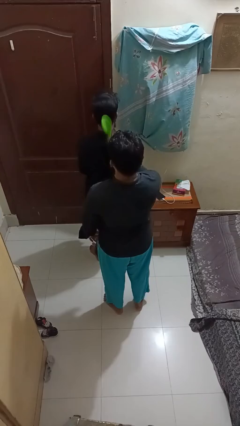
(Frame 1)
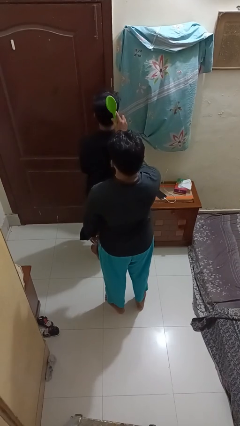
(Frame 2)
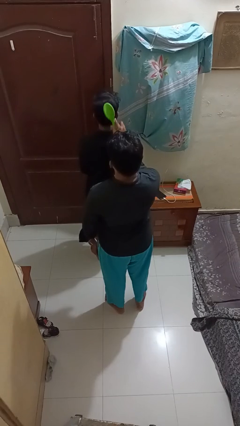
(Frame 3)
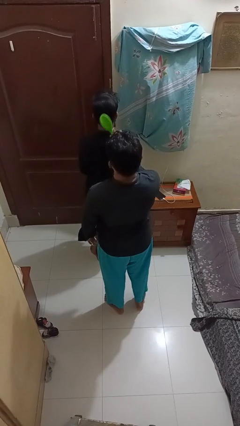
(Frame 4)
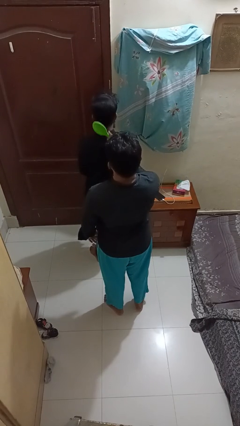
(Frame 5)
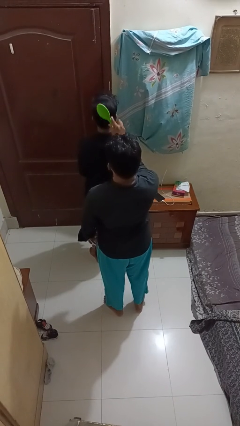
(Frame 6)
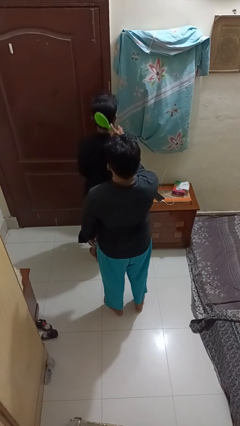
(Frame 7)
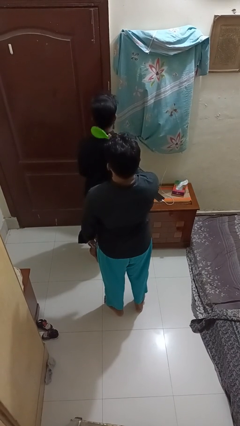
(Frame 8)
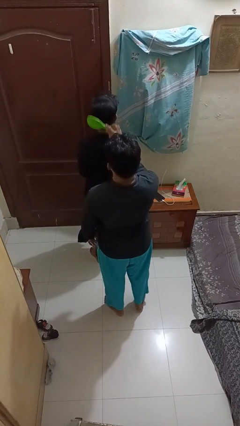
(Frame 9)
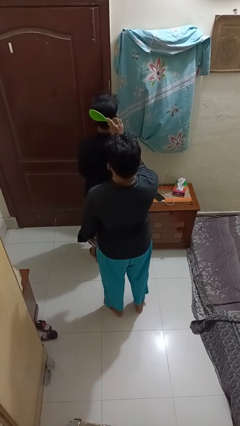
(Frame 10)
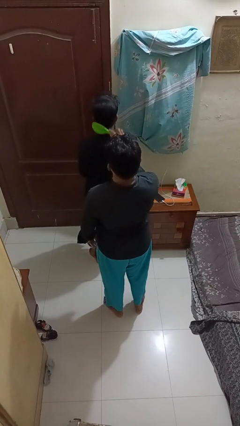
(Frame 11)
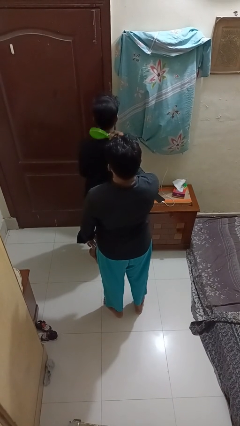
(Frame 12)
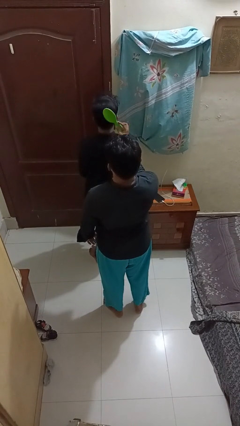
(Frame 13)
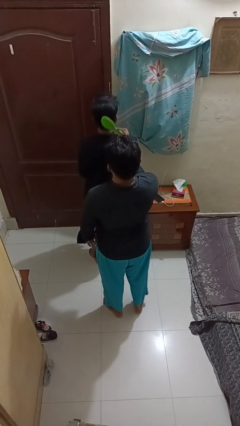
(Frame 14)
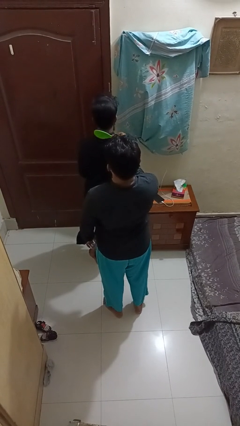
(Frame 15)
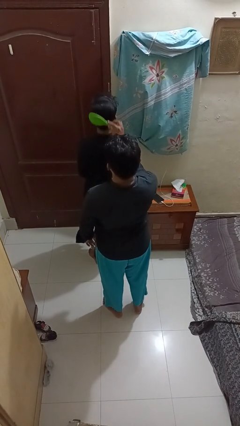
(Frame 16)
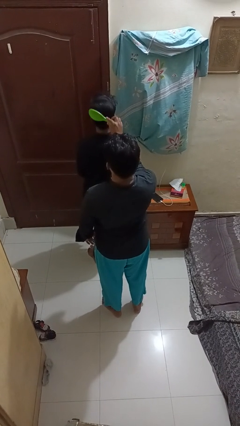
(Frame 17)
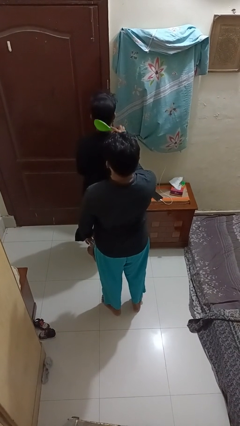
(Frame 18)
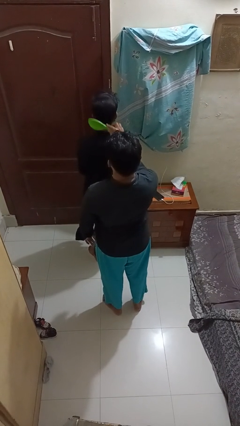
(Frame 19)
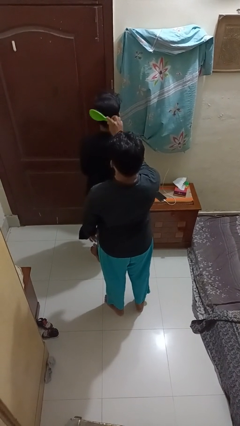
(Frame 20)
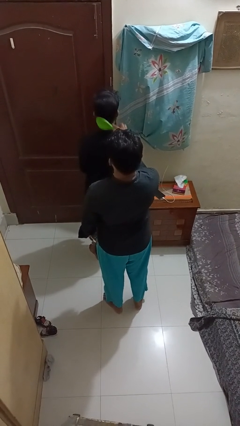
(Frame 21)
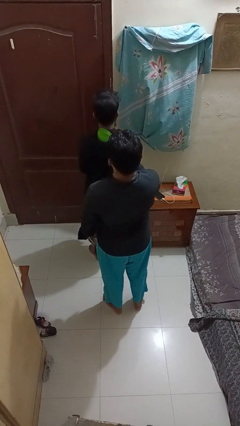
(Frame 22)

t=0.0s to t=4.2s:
person brushes hair of person

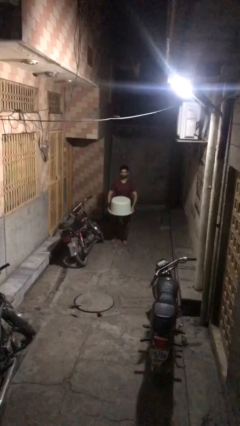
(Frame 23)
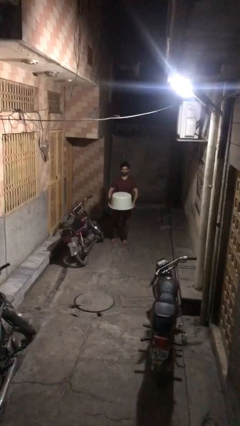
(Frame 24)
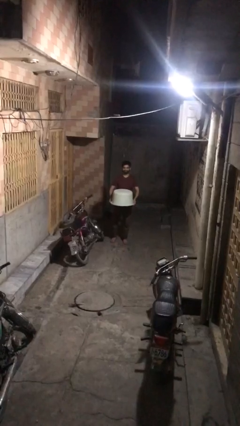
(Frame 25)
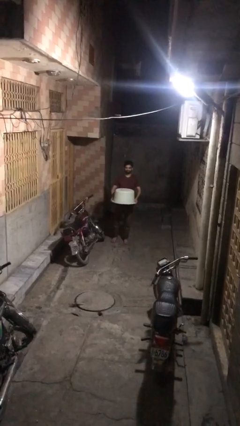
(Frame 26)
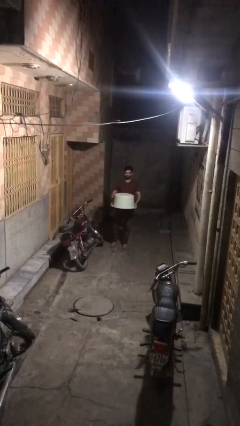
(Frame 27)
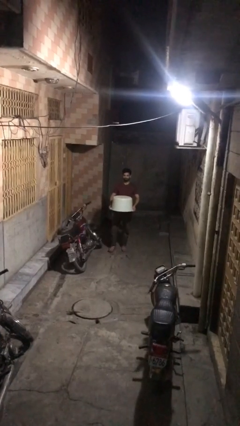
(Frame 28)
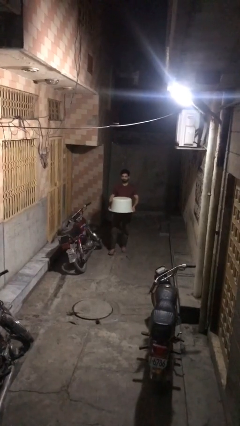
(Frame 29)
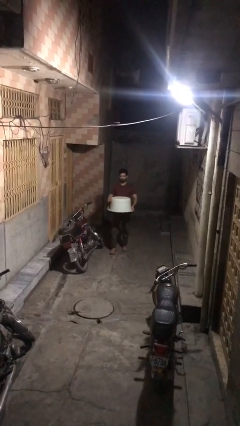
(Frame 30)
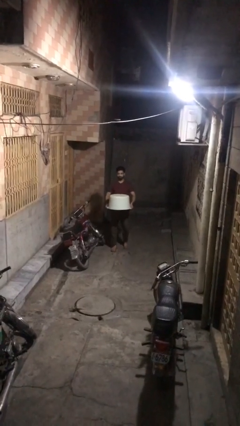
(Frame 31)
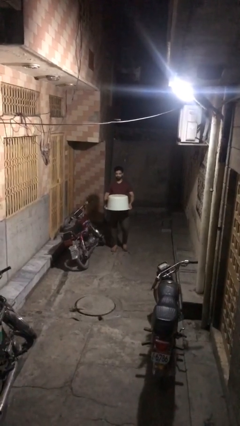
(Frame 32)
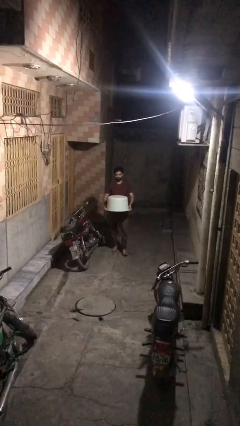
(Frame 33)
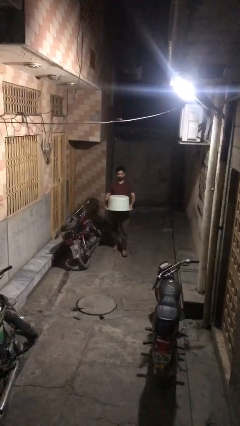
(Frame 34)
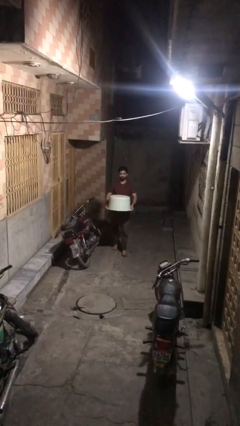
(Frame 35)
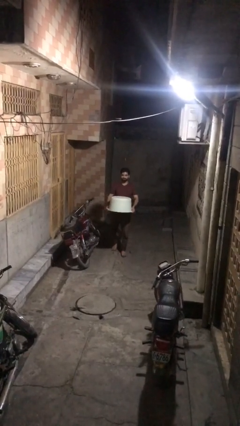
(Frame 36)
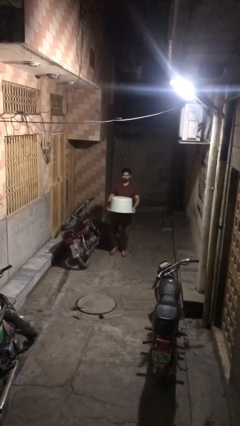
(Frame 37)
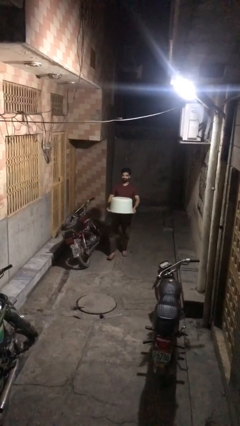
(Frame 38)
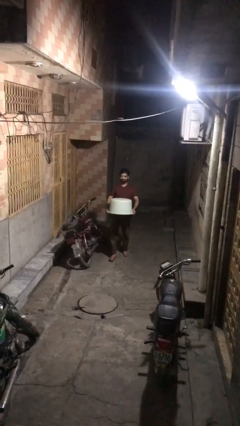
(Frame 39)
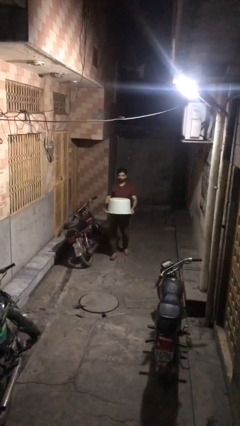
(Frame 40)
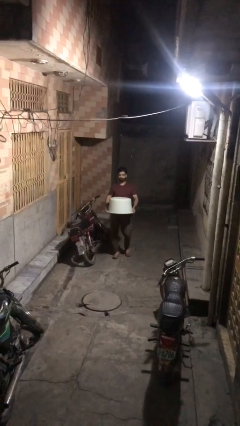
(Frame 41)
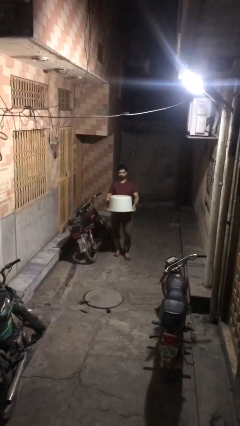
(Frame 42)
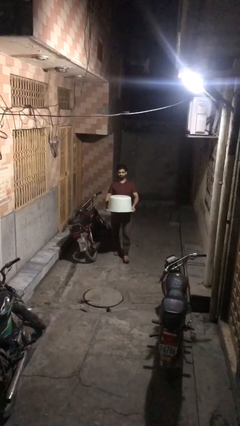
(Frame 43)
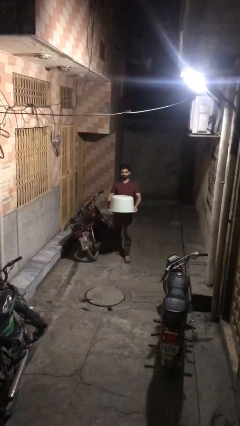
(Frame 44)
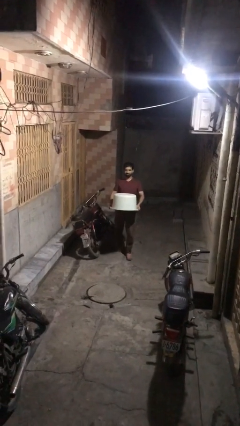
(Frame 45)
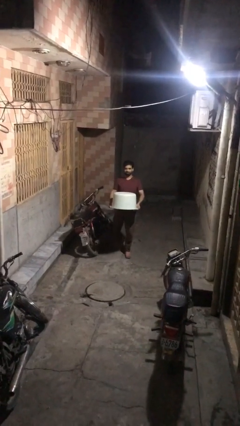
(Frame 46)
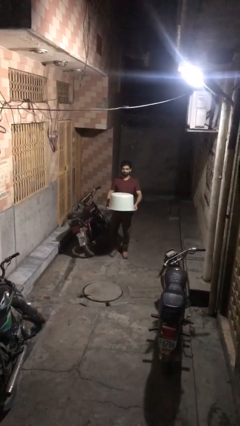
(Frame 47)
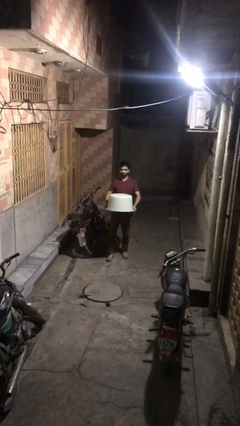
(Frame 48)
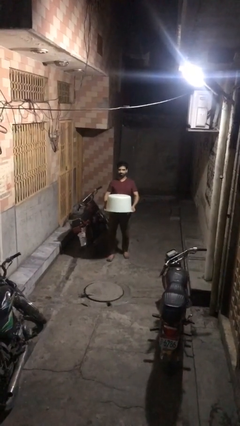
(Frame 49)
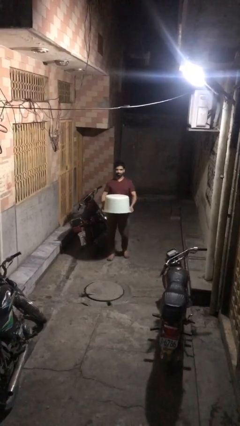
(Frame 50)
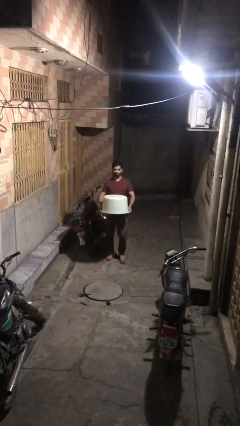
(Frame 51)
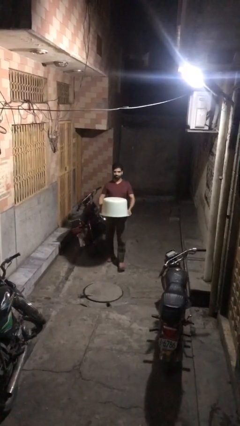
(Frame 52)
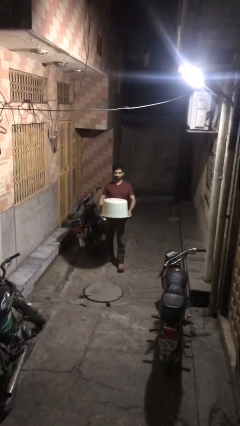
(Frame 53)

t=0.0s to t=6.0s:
person carries heavy object

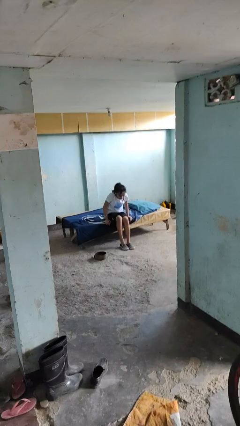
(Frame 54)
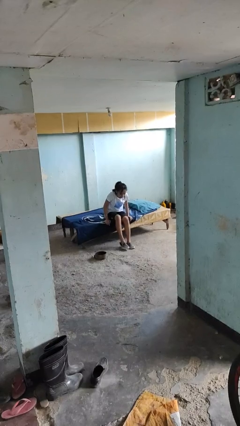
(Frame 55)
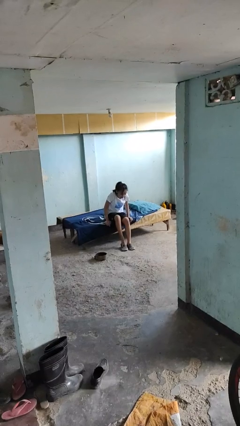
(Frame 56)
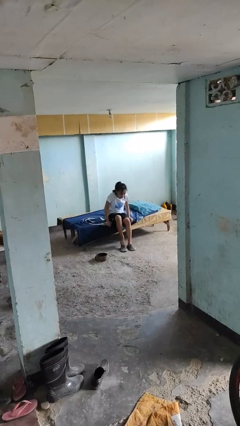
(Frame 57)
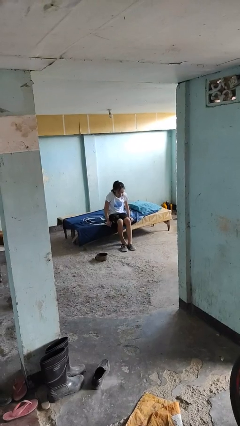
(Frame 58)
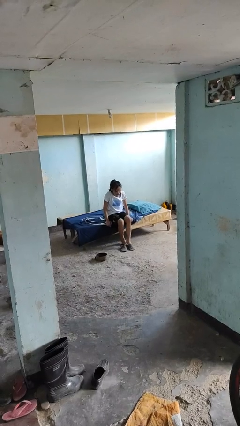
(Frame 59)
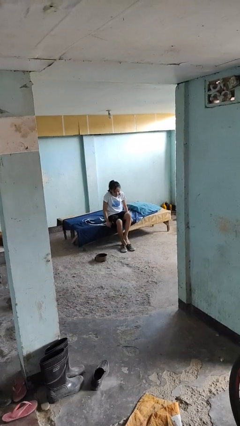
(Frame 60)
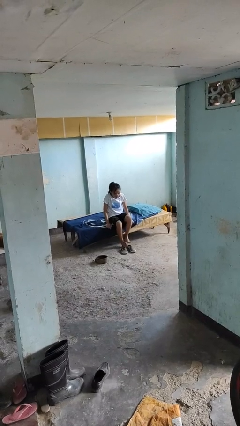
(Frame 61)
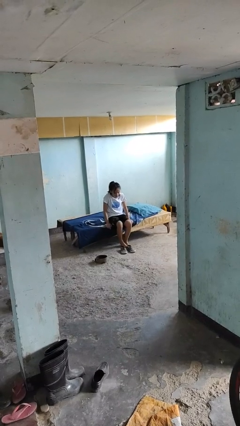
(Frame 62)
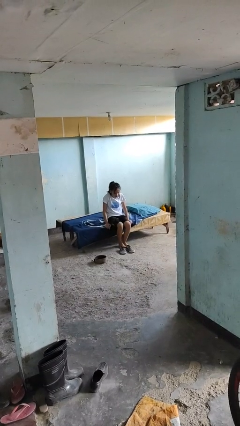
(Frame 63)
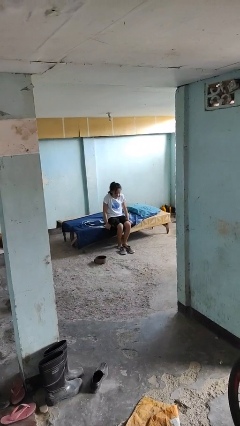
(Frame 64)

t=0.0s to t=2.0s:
person takes off shoes

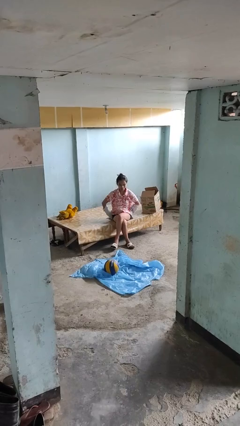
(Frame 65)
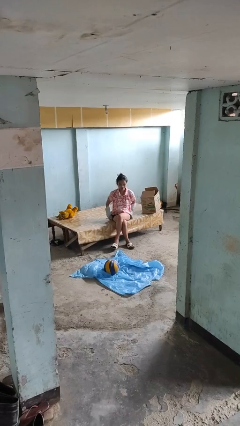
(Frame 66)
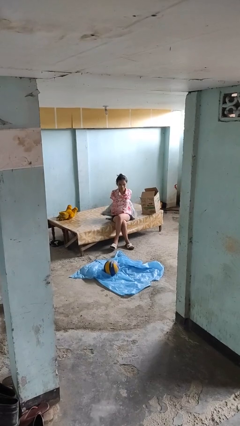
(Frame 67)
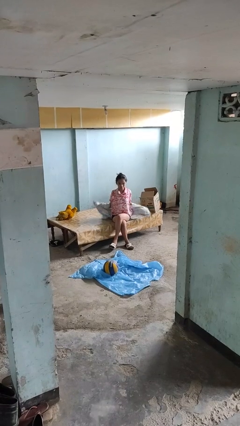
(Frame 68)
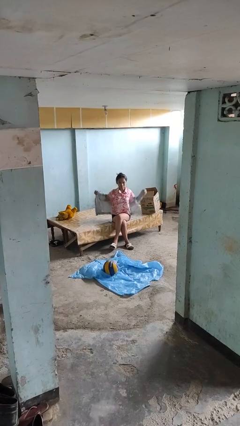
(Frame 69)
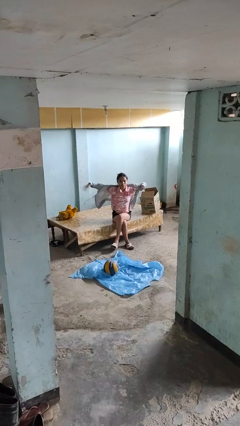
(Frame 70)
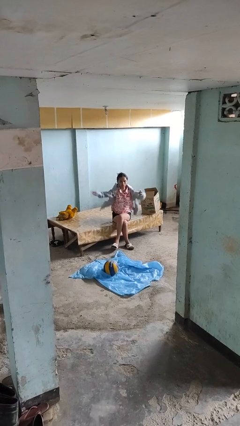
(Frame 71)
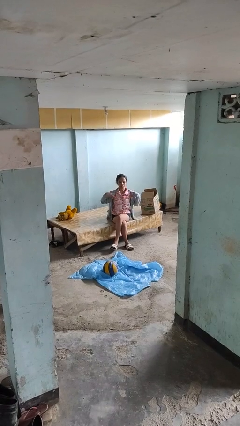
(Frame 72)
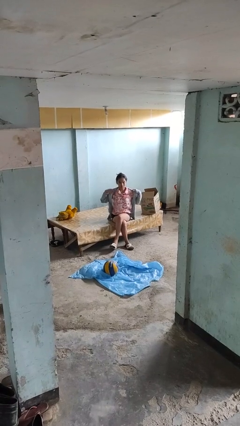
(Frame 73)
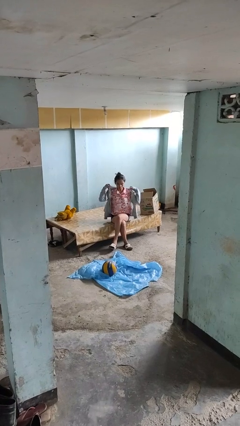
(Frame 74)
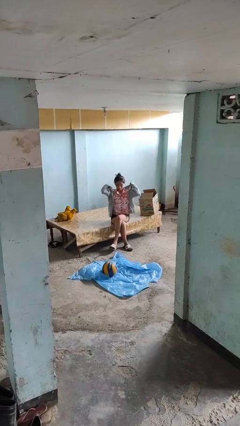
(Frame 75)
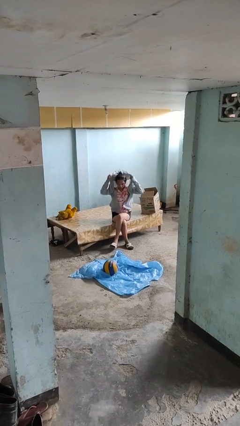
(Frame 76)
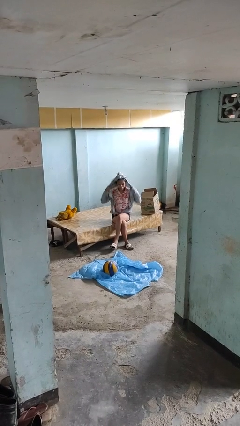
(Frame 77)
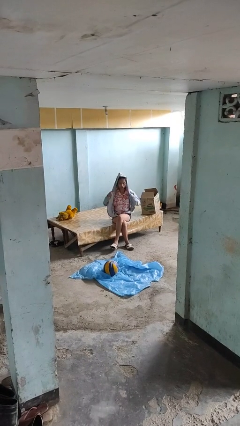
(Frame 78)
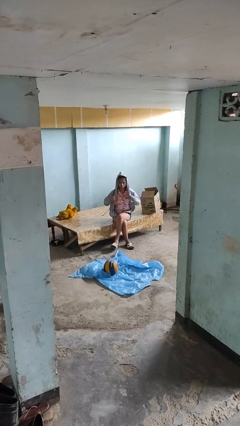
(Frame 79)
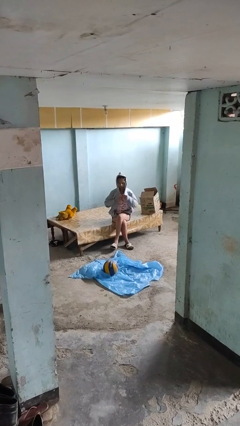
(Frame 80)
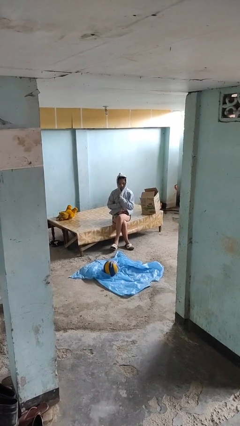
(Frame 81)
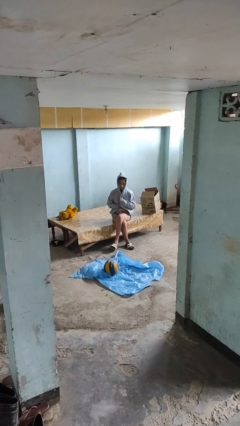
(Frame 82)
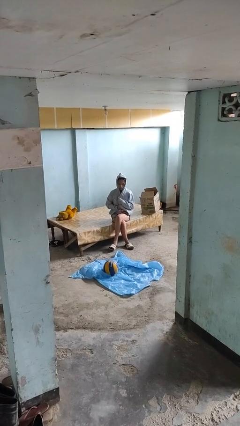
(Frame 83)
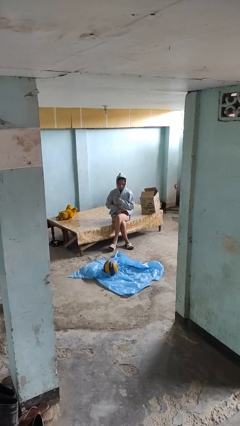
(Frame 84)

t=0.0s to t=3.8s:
person puts on hoodie

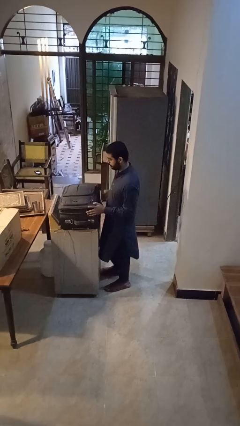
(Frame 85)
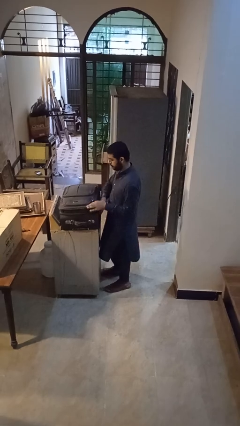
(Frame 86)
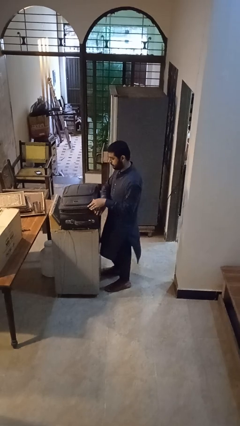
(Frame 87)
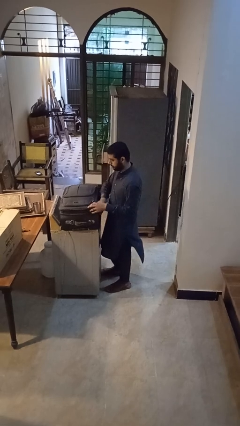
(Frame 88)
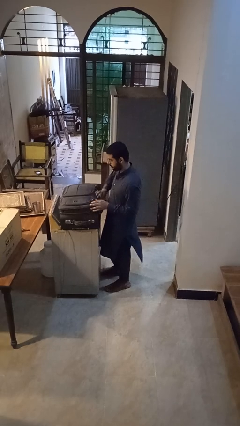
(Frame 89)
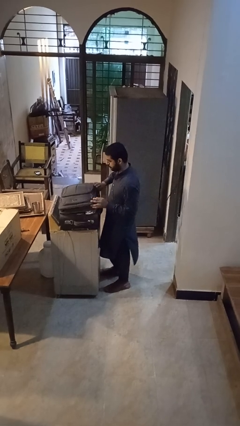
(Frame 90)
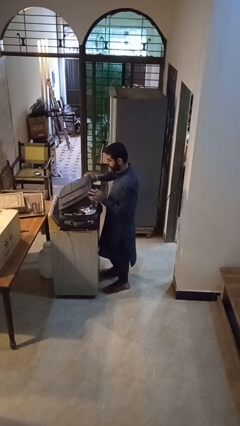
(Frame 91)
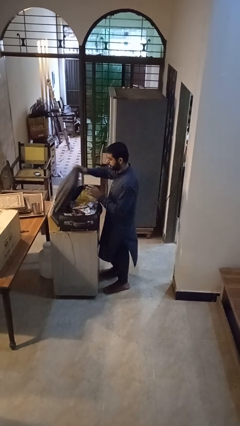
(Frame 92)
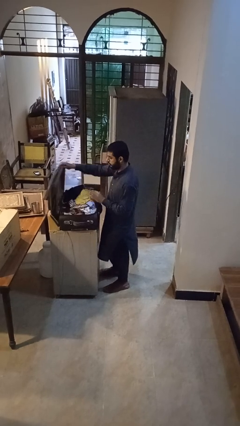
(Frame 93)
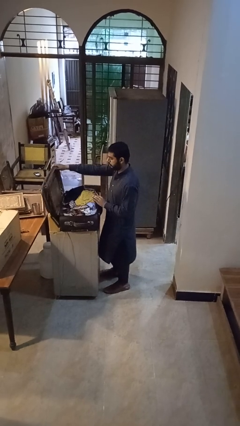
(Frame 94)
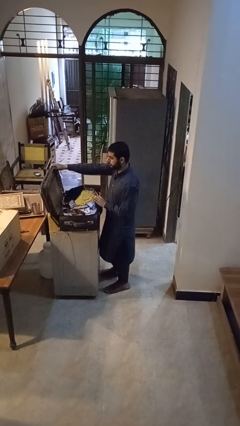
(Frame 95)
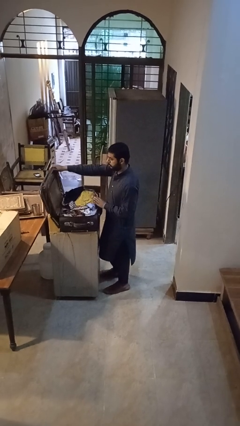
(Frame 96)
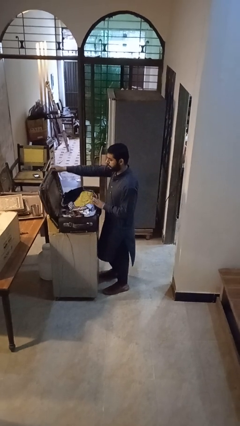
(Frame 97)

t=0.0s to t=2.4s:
person opens suitcase
